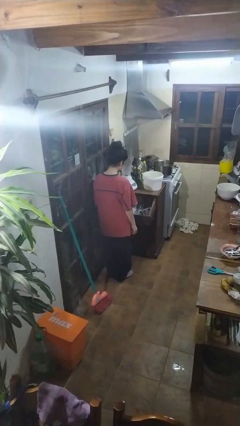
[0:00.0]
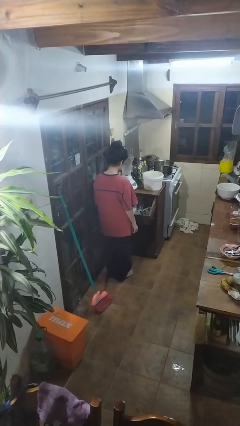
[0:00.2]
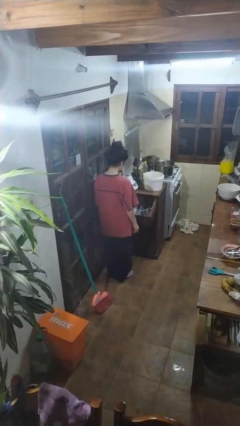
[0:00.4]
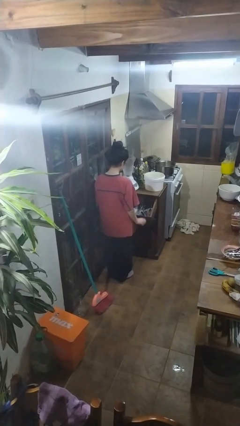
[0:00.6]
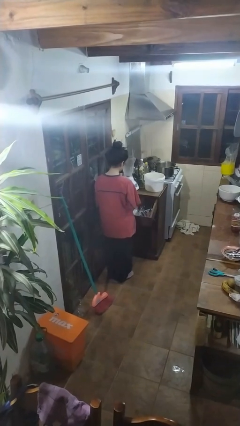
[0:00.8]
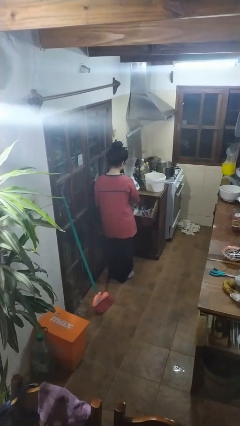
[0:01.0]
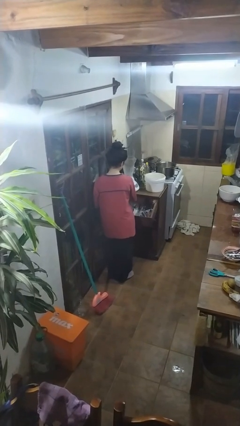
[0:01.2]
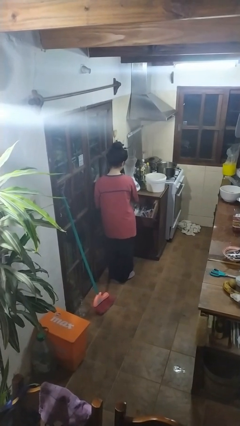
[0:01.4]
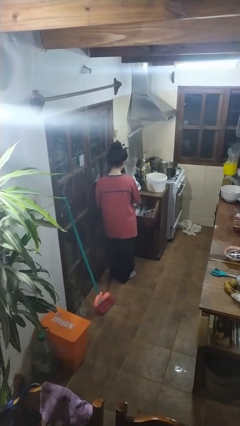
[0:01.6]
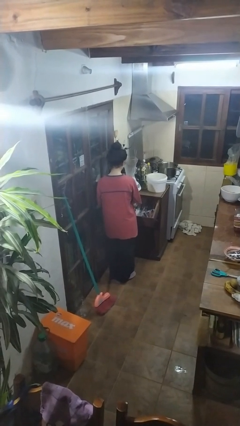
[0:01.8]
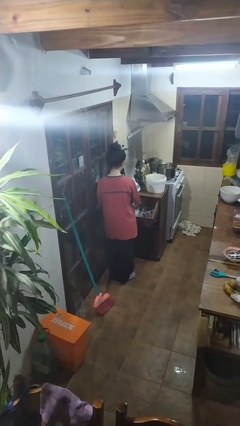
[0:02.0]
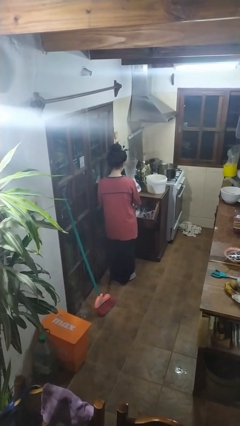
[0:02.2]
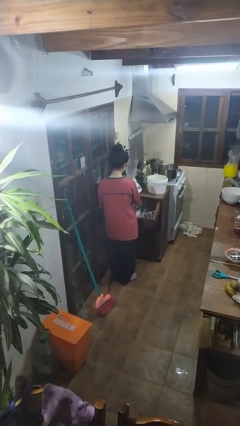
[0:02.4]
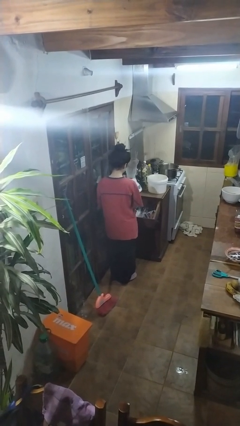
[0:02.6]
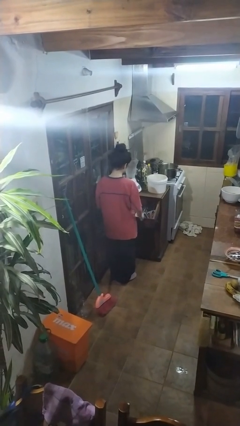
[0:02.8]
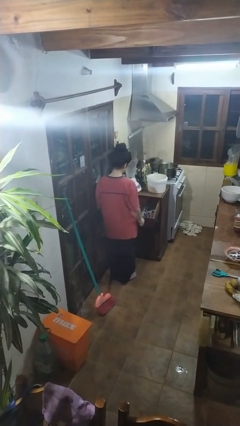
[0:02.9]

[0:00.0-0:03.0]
person searches in kitchen drawer

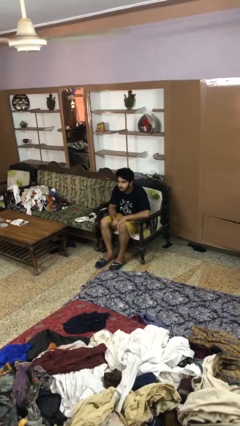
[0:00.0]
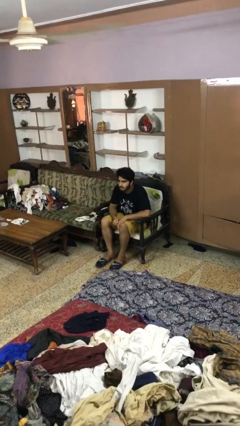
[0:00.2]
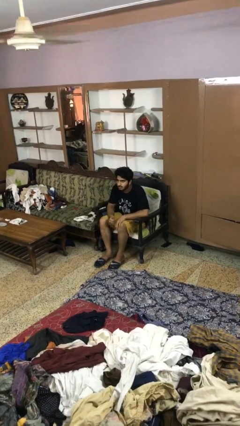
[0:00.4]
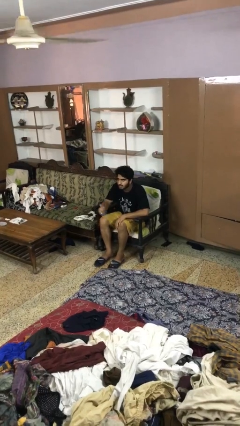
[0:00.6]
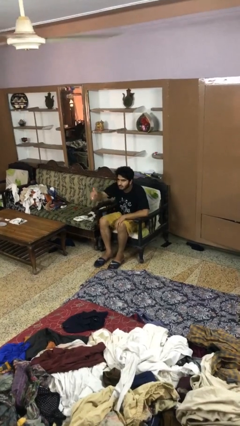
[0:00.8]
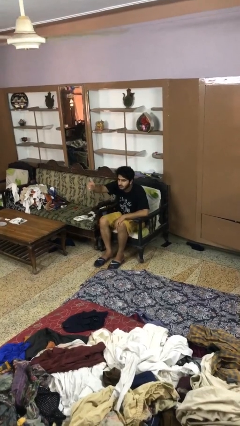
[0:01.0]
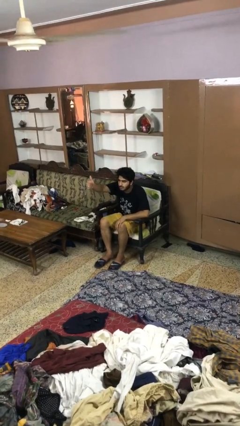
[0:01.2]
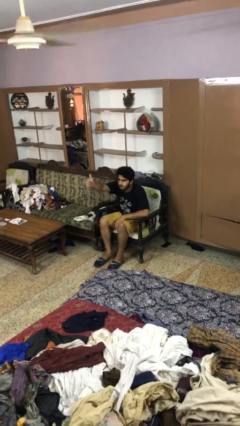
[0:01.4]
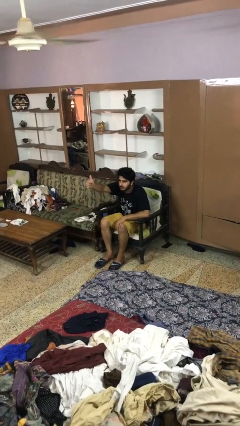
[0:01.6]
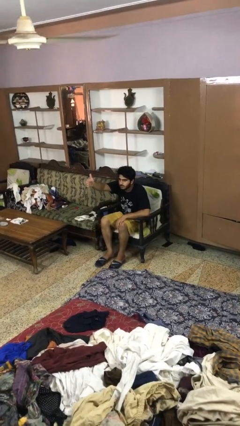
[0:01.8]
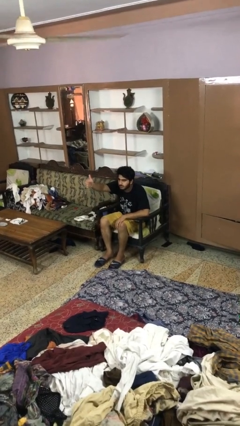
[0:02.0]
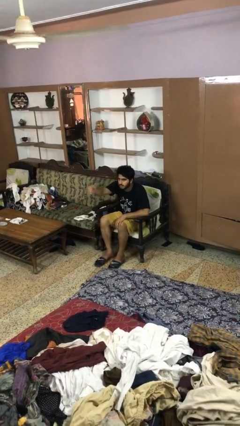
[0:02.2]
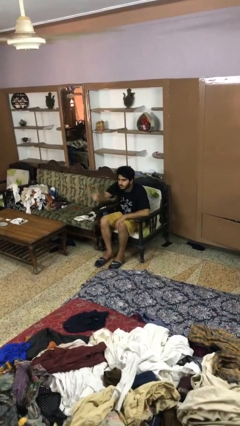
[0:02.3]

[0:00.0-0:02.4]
person gestures thumbs up

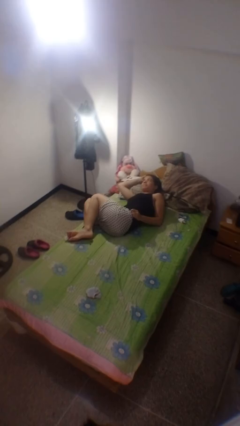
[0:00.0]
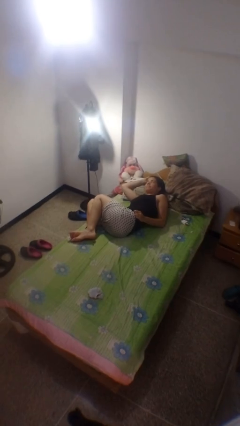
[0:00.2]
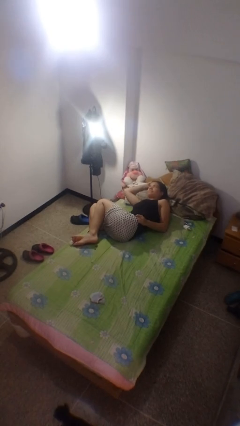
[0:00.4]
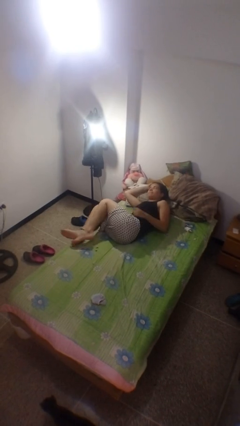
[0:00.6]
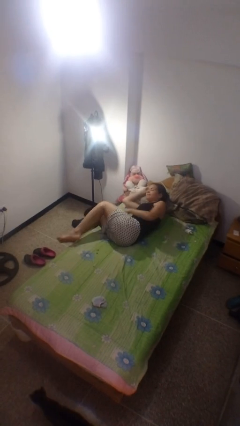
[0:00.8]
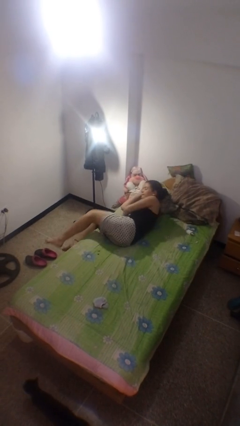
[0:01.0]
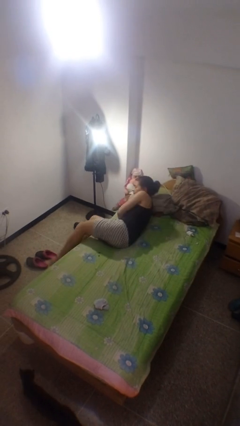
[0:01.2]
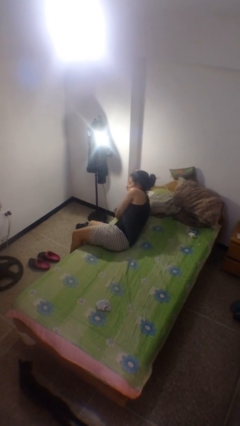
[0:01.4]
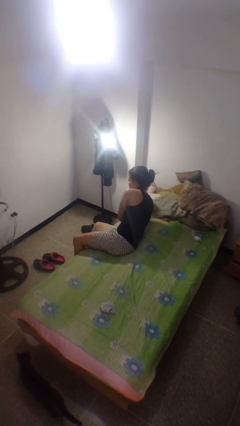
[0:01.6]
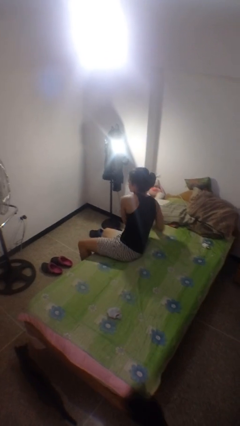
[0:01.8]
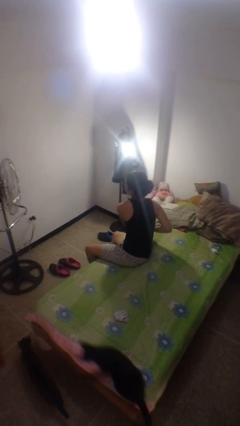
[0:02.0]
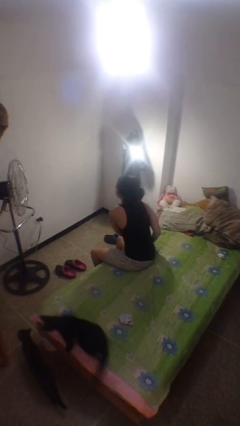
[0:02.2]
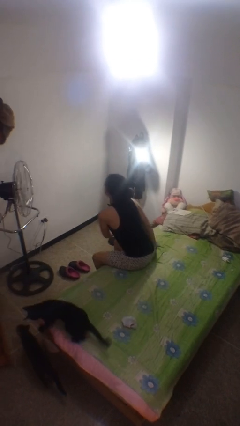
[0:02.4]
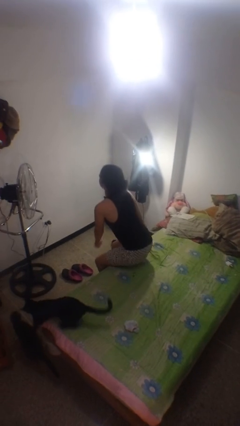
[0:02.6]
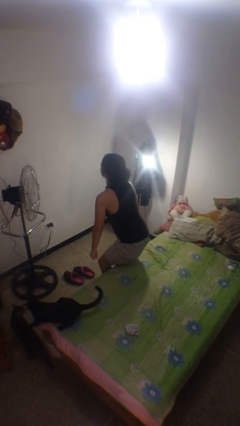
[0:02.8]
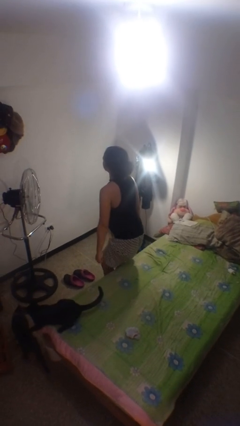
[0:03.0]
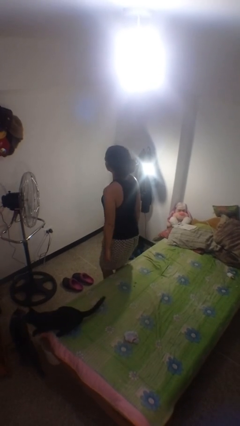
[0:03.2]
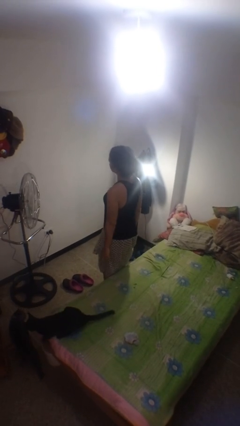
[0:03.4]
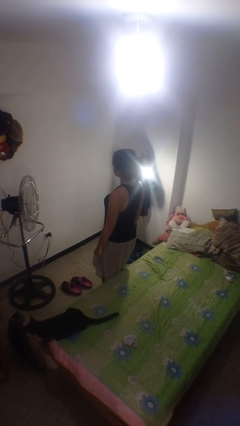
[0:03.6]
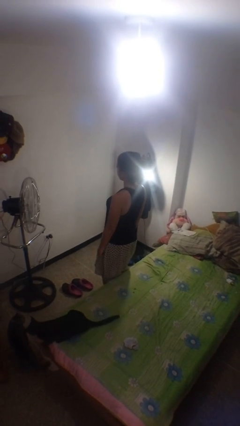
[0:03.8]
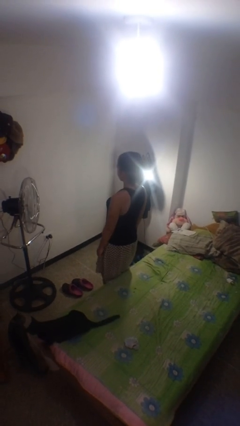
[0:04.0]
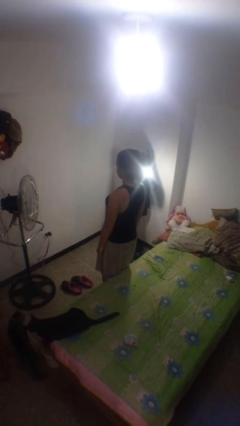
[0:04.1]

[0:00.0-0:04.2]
person stands up

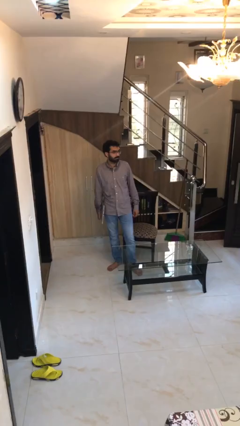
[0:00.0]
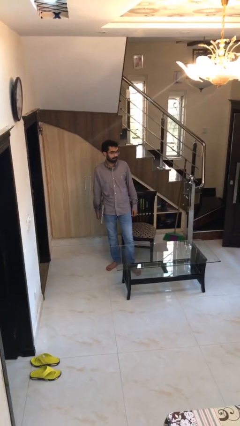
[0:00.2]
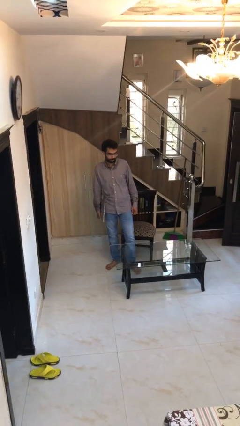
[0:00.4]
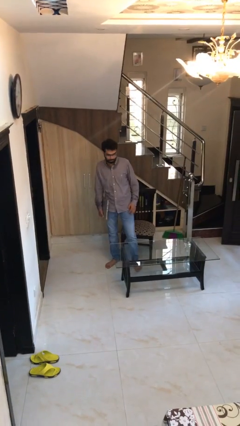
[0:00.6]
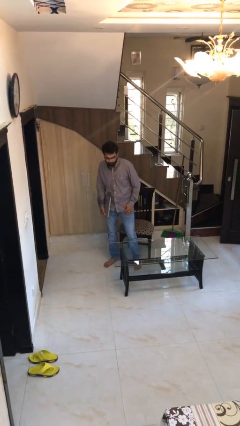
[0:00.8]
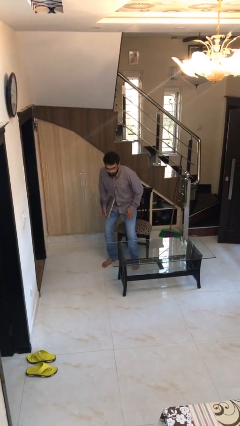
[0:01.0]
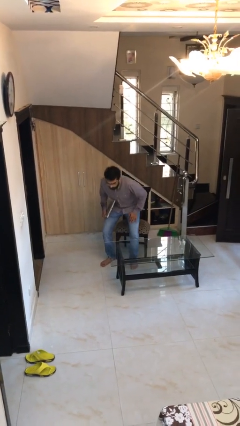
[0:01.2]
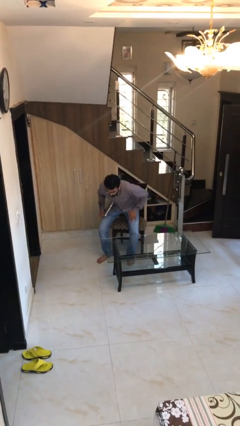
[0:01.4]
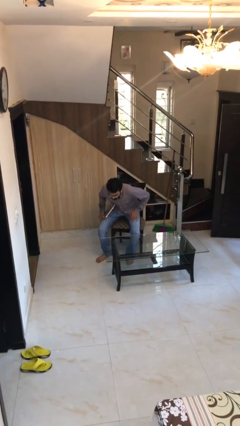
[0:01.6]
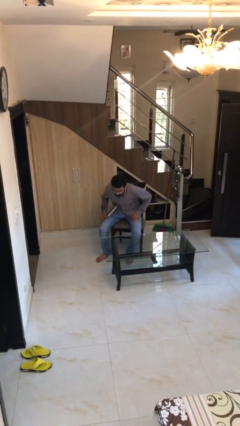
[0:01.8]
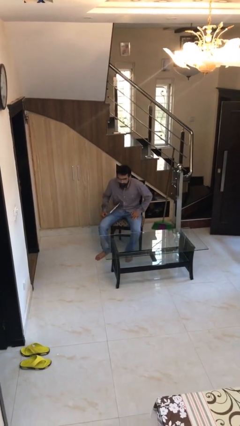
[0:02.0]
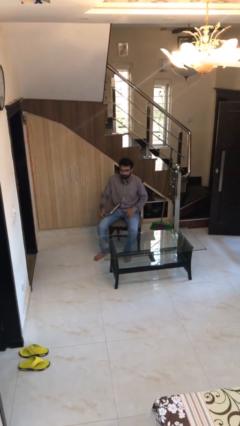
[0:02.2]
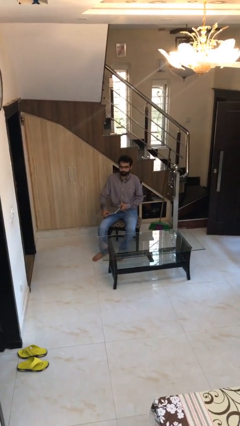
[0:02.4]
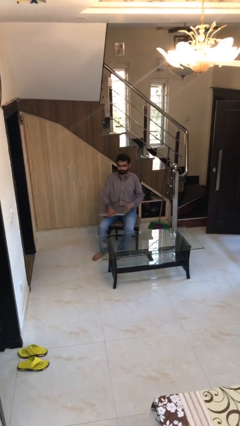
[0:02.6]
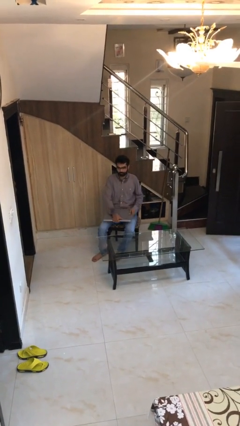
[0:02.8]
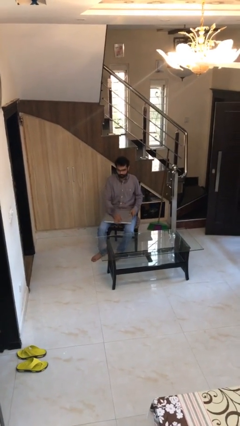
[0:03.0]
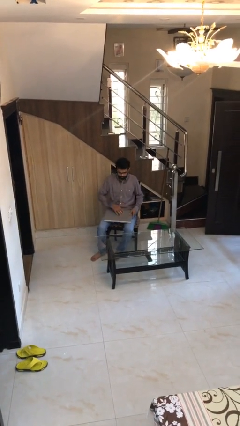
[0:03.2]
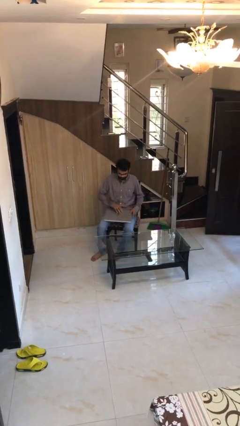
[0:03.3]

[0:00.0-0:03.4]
person sits down

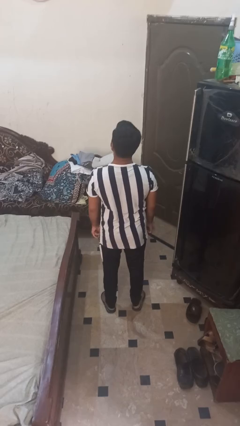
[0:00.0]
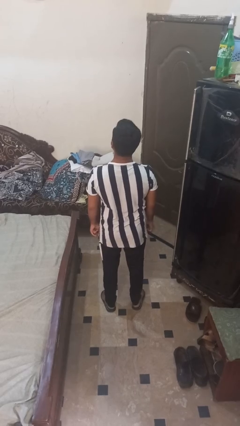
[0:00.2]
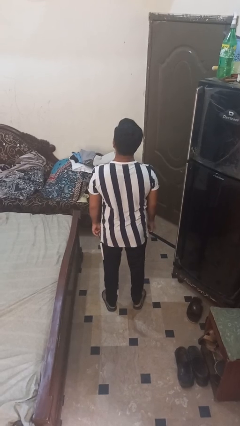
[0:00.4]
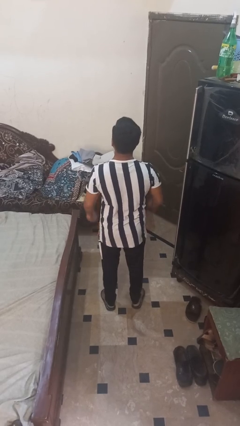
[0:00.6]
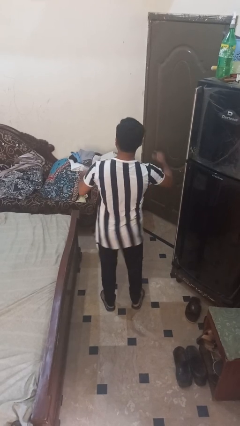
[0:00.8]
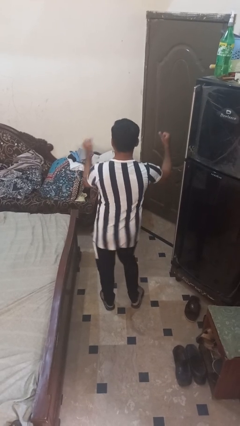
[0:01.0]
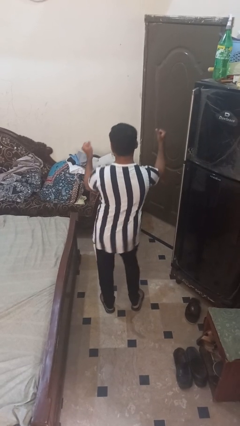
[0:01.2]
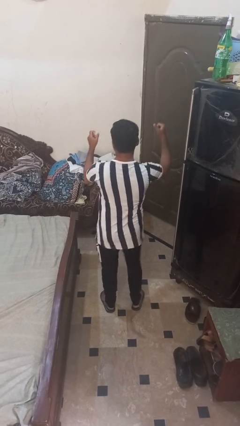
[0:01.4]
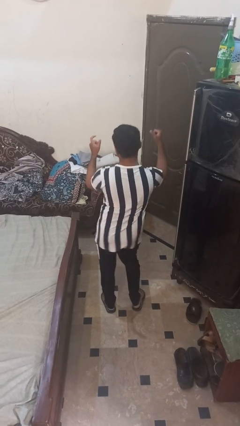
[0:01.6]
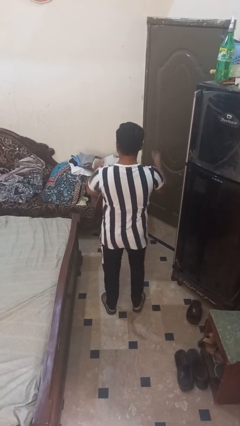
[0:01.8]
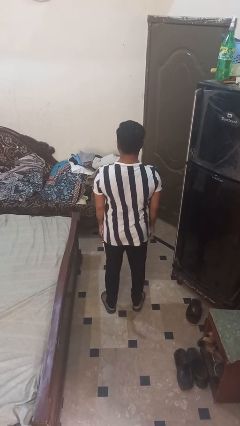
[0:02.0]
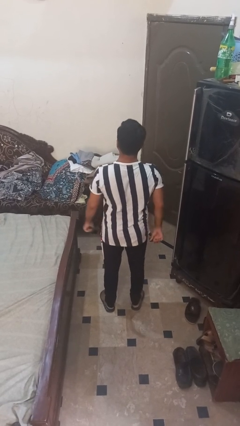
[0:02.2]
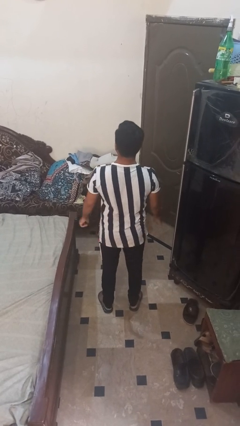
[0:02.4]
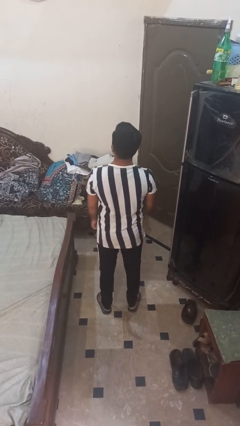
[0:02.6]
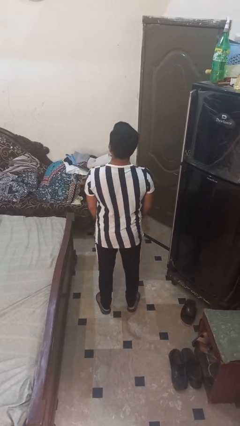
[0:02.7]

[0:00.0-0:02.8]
person wiggles hips

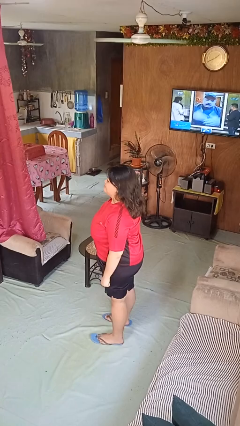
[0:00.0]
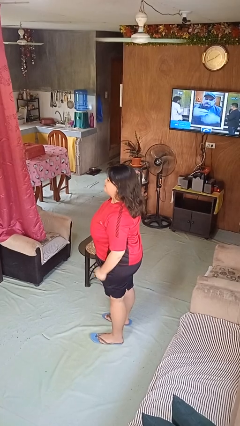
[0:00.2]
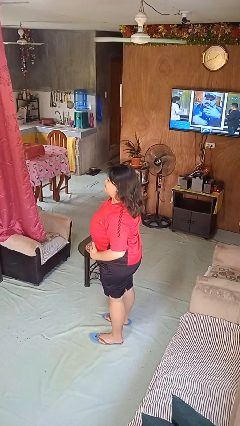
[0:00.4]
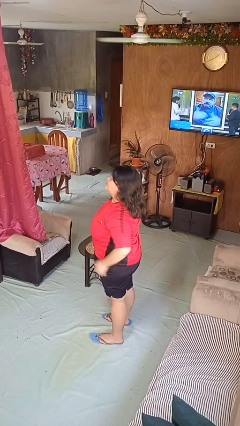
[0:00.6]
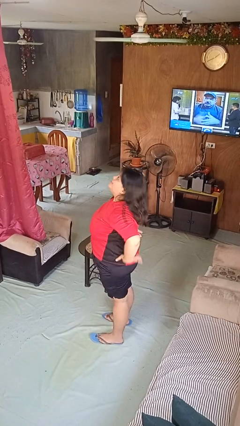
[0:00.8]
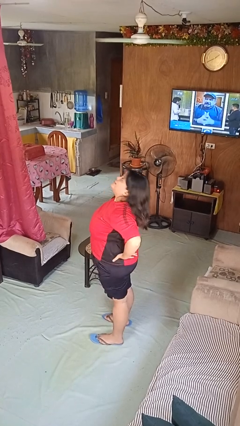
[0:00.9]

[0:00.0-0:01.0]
person stretches back

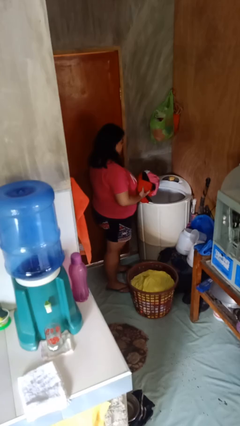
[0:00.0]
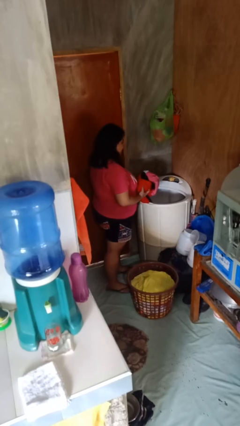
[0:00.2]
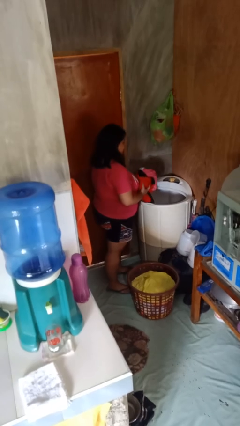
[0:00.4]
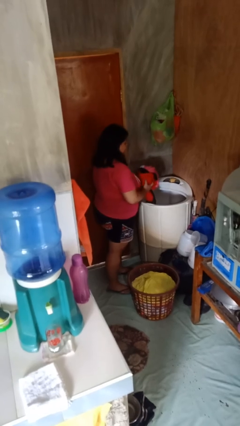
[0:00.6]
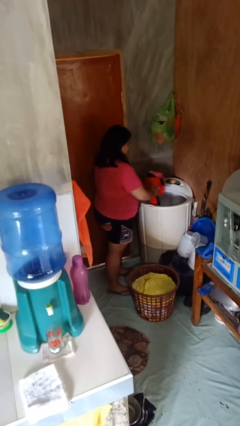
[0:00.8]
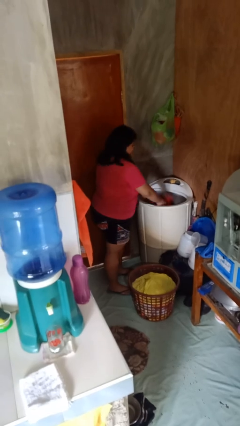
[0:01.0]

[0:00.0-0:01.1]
person loads clotheswasher
